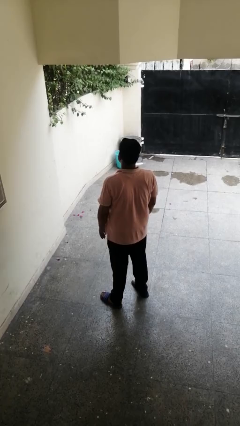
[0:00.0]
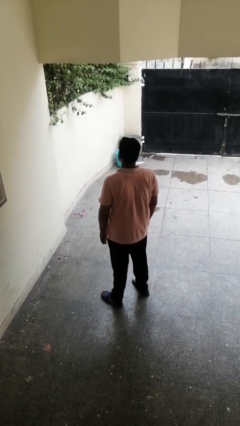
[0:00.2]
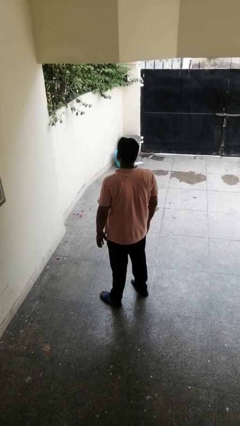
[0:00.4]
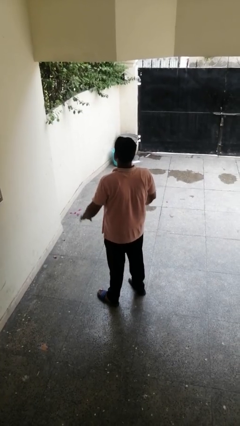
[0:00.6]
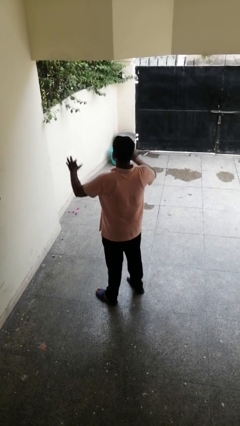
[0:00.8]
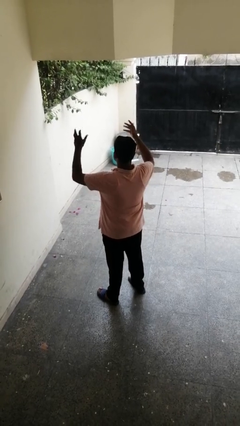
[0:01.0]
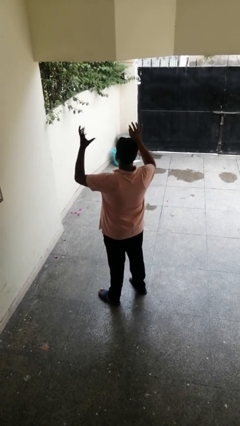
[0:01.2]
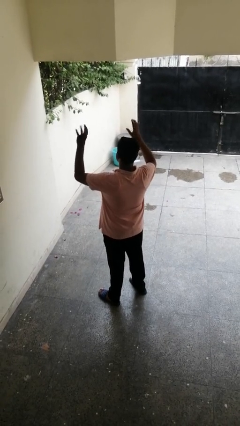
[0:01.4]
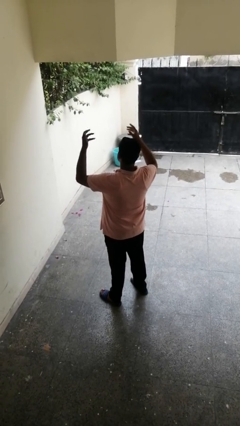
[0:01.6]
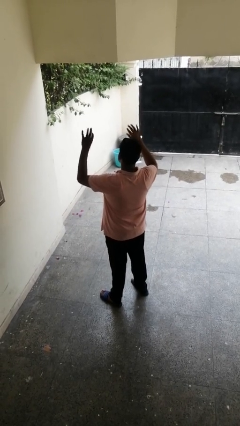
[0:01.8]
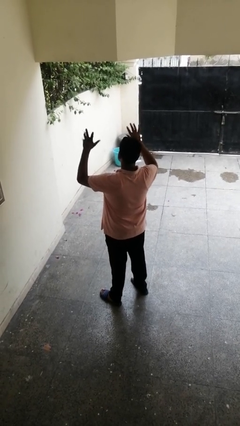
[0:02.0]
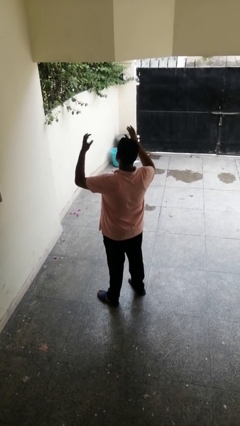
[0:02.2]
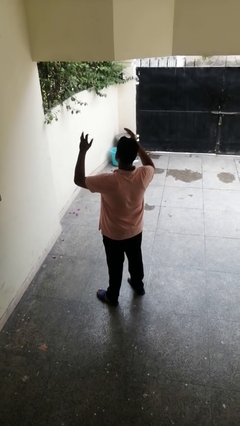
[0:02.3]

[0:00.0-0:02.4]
person dances in place

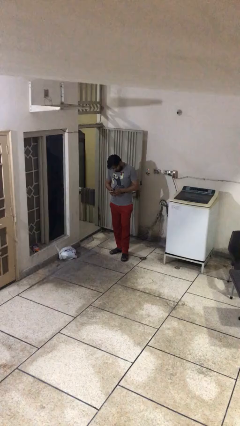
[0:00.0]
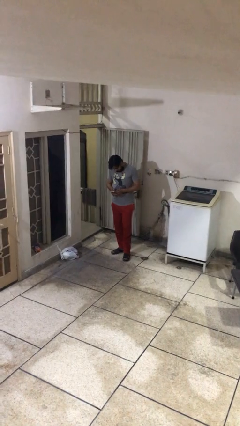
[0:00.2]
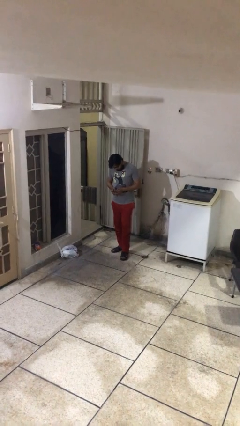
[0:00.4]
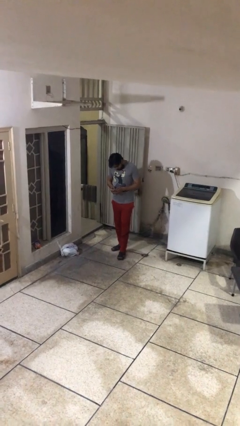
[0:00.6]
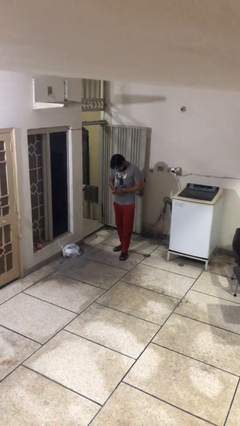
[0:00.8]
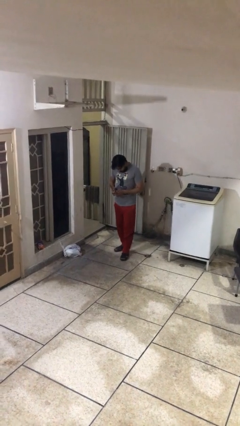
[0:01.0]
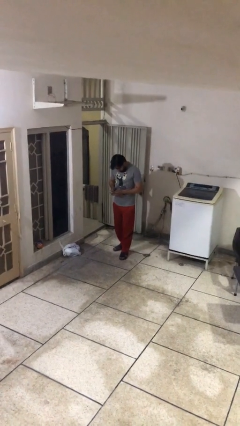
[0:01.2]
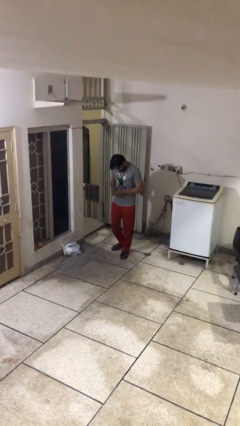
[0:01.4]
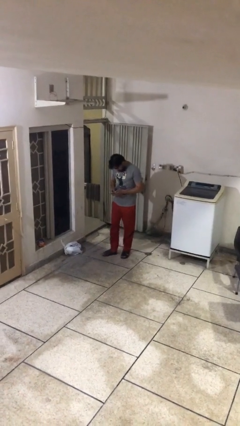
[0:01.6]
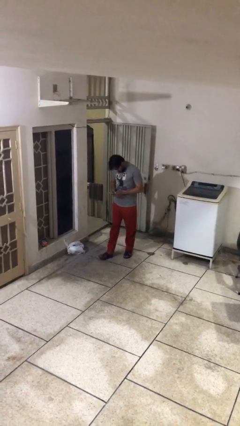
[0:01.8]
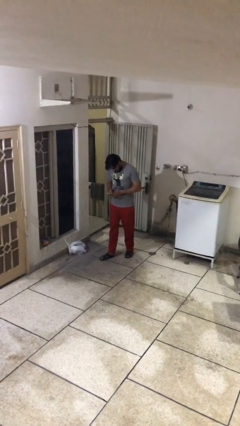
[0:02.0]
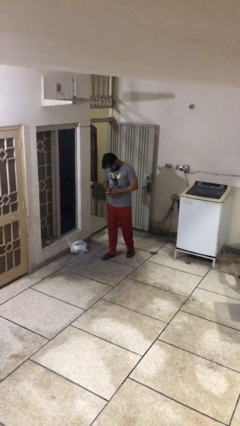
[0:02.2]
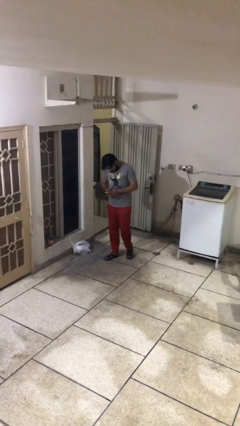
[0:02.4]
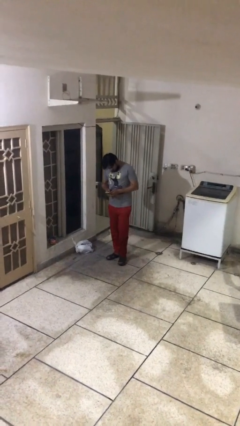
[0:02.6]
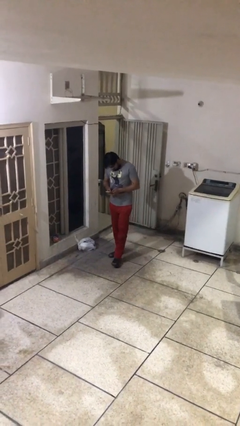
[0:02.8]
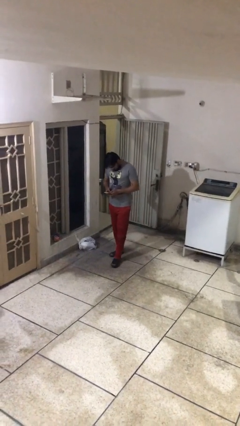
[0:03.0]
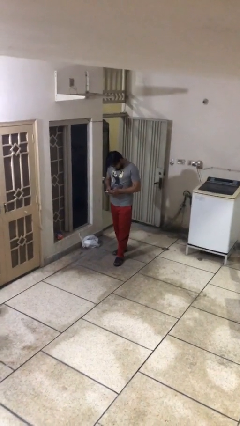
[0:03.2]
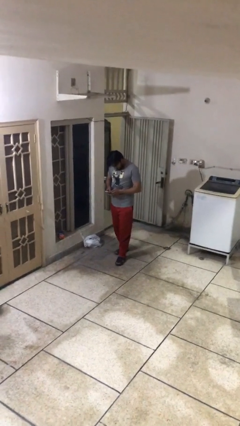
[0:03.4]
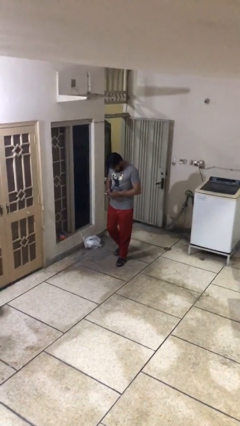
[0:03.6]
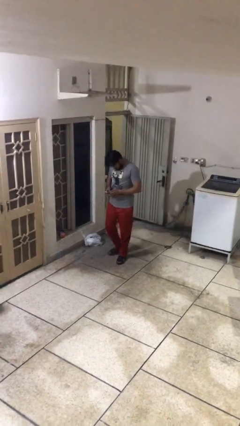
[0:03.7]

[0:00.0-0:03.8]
person texts on phone

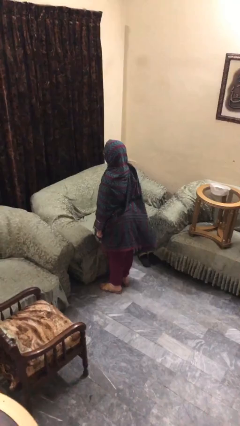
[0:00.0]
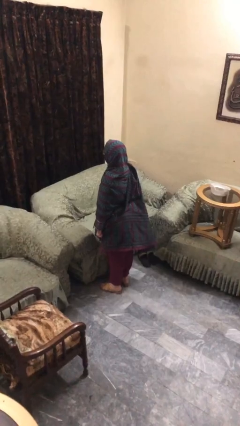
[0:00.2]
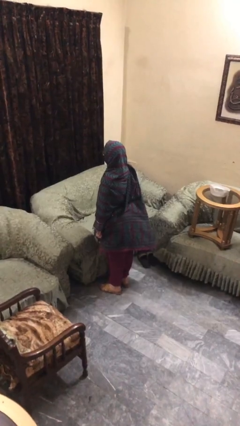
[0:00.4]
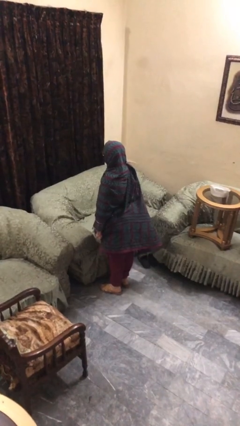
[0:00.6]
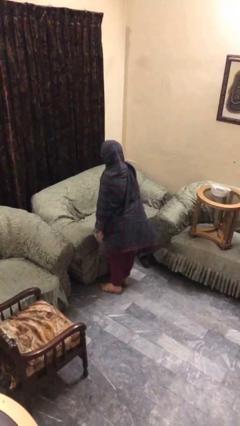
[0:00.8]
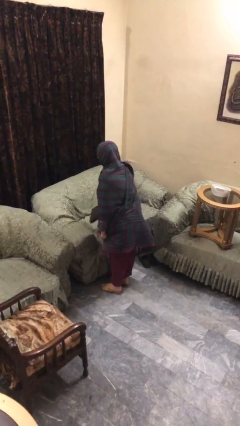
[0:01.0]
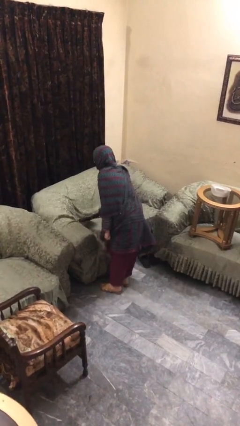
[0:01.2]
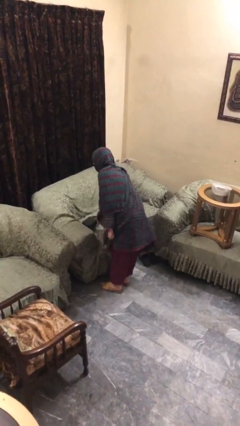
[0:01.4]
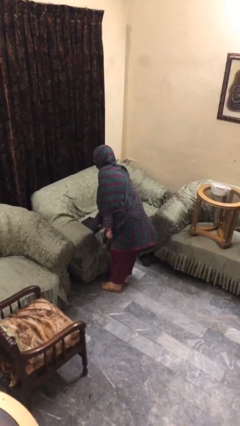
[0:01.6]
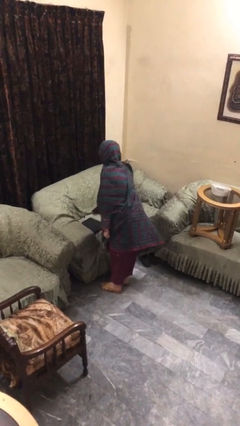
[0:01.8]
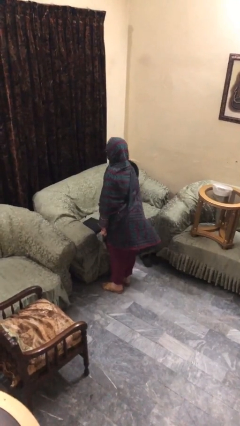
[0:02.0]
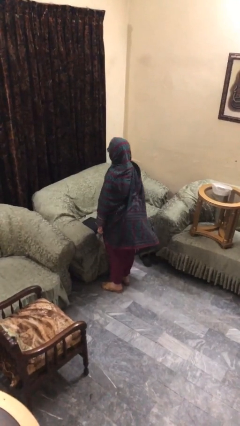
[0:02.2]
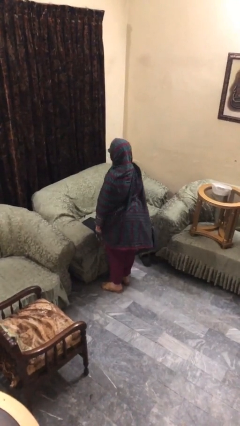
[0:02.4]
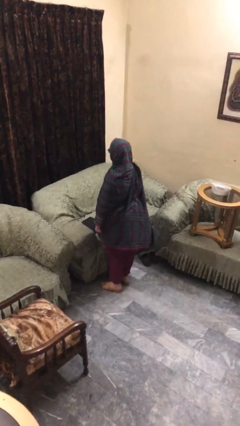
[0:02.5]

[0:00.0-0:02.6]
person puts down object on couch

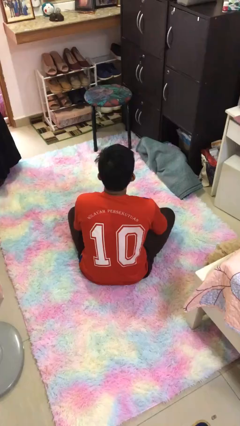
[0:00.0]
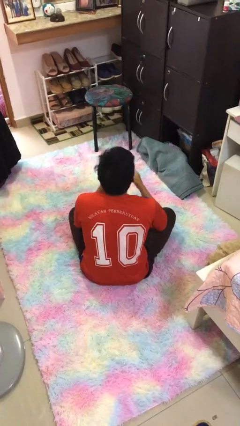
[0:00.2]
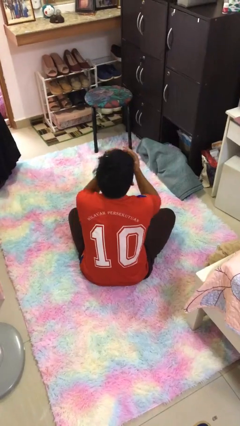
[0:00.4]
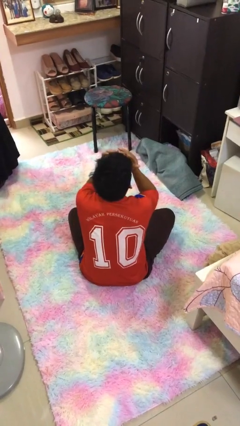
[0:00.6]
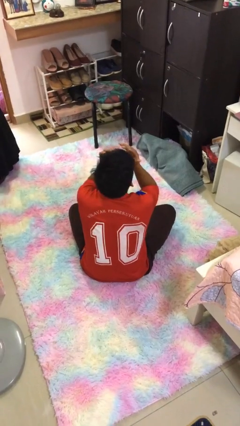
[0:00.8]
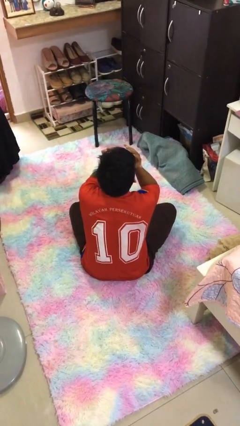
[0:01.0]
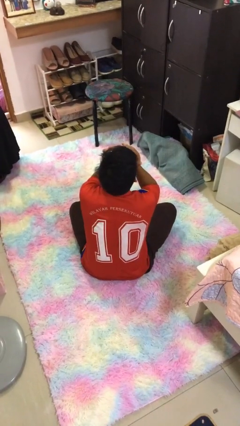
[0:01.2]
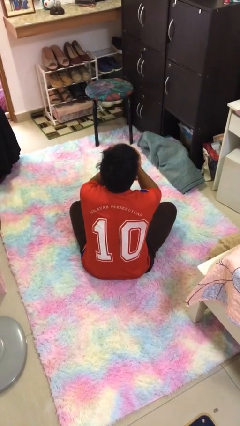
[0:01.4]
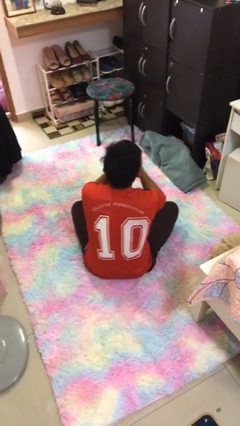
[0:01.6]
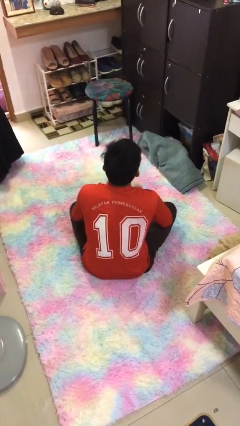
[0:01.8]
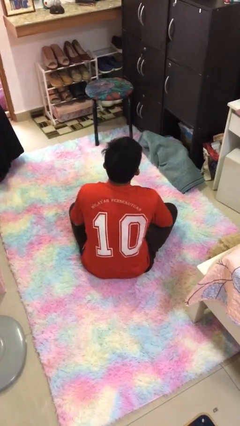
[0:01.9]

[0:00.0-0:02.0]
person covers face with hands

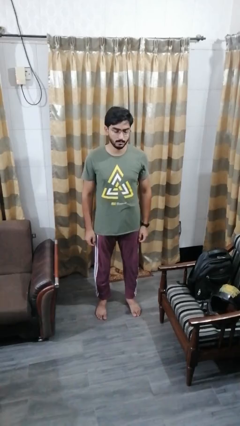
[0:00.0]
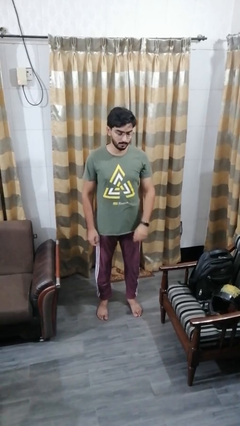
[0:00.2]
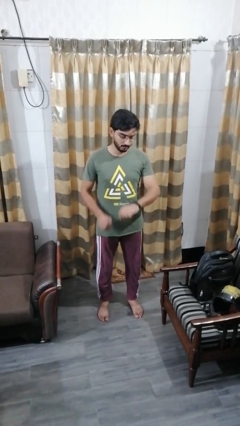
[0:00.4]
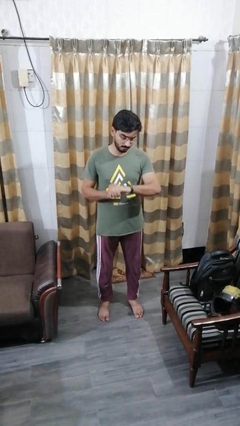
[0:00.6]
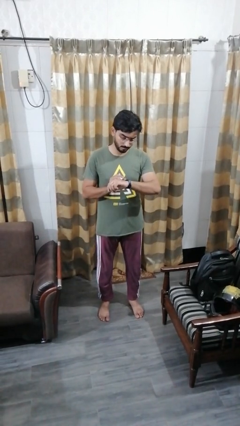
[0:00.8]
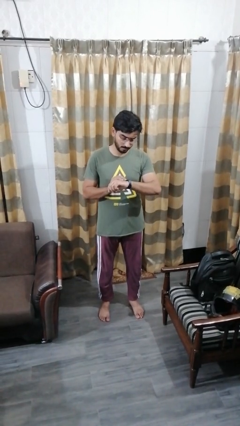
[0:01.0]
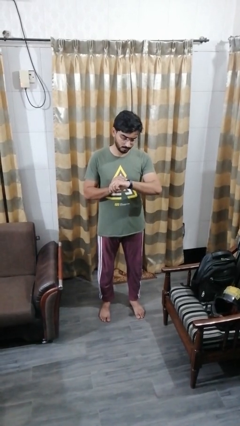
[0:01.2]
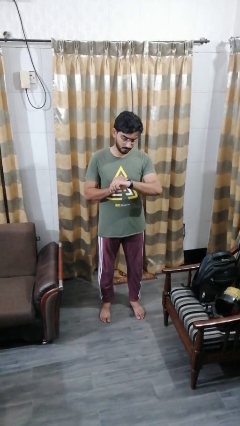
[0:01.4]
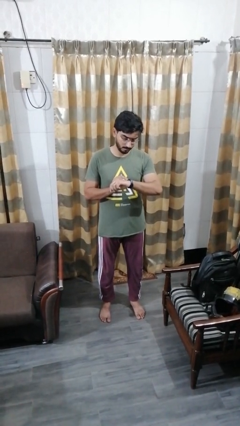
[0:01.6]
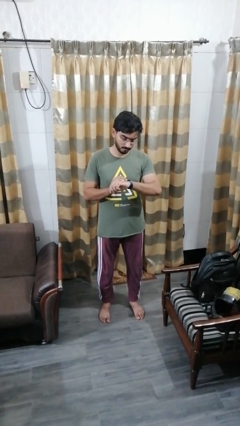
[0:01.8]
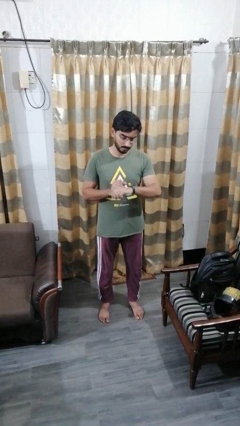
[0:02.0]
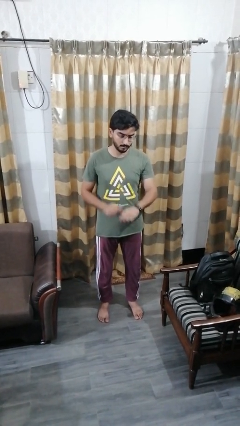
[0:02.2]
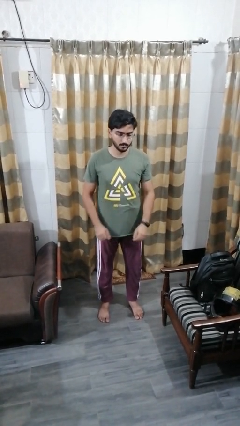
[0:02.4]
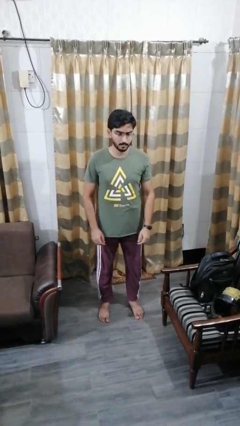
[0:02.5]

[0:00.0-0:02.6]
person looks at wristwatch

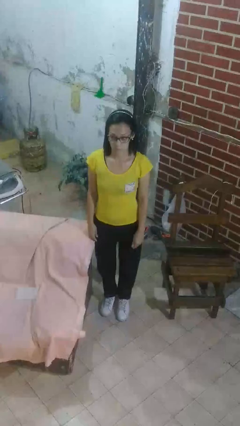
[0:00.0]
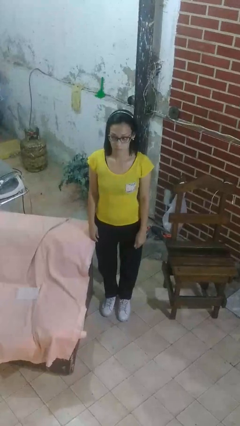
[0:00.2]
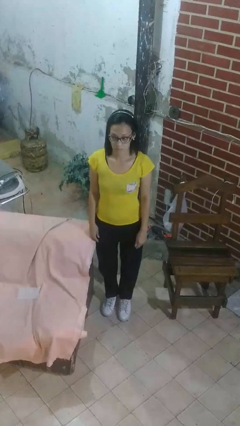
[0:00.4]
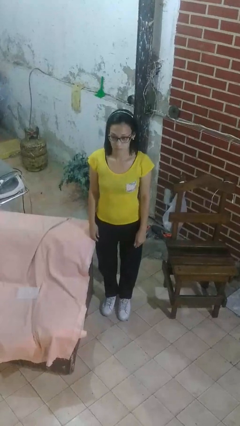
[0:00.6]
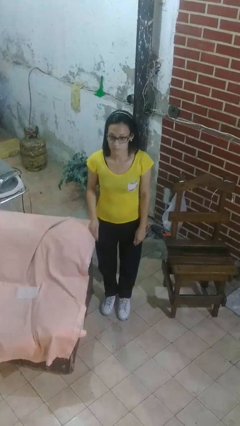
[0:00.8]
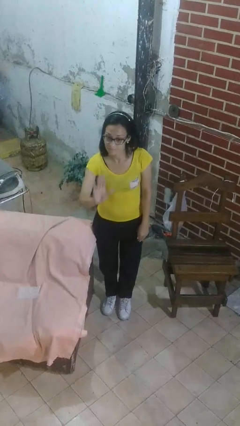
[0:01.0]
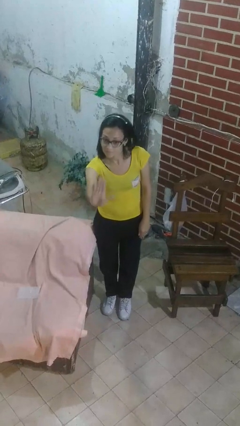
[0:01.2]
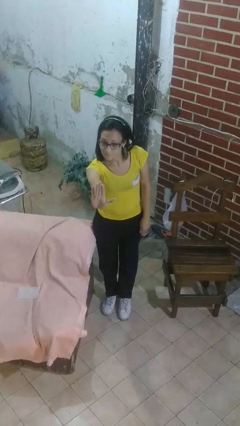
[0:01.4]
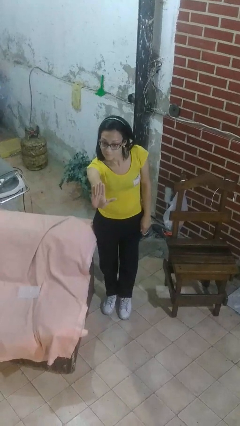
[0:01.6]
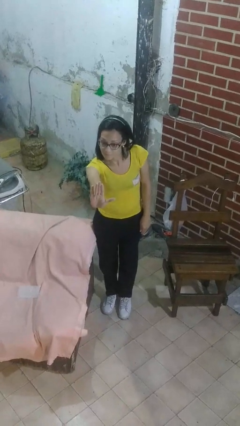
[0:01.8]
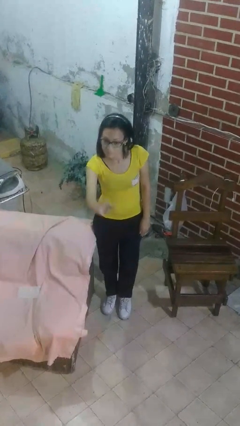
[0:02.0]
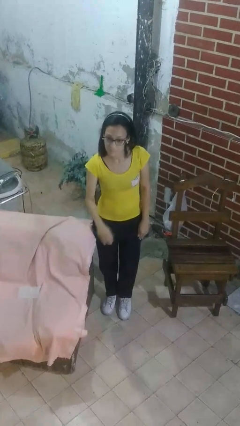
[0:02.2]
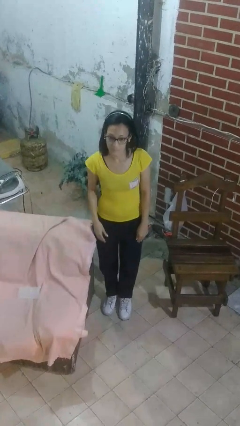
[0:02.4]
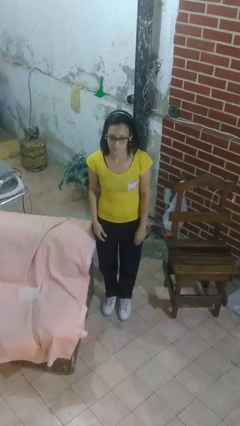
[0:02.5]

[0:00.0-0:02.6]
person gestures stop

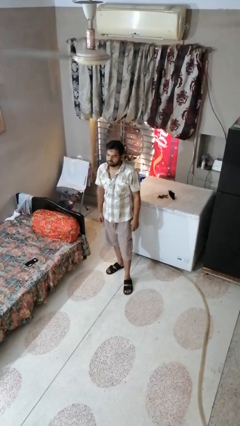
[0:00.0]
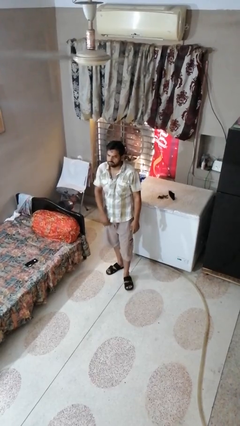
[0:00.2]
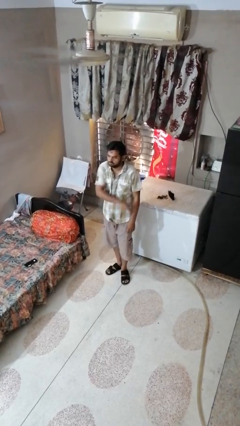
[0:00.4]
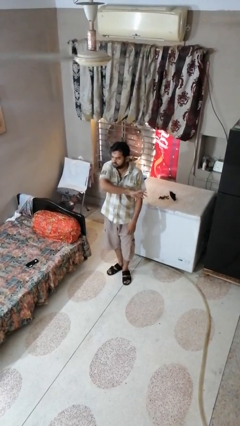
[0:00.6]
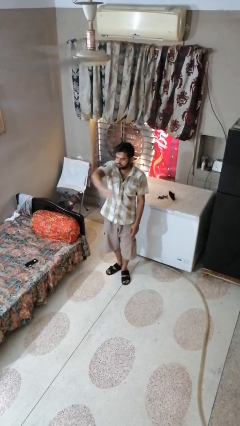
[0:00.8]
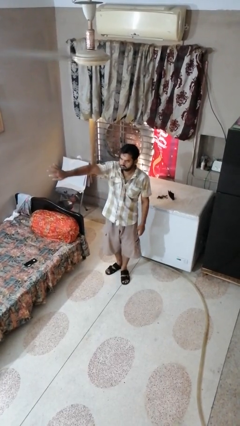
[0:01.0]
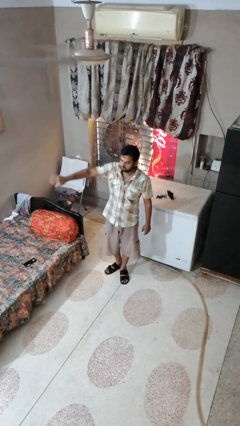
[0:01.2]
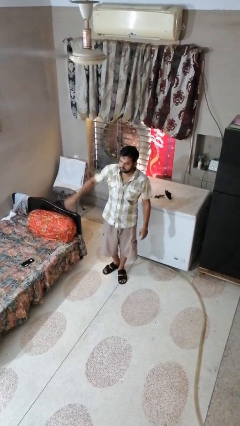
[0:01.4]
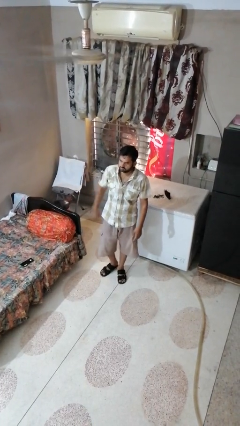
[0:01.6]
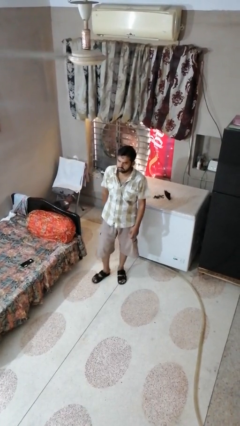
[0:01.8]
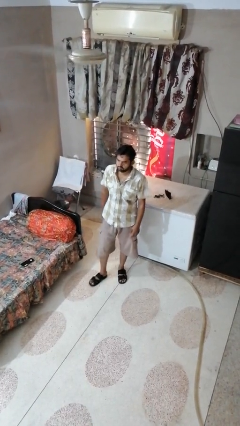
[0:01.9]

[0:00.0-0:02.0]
person gestures swipe right
